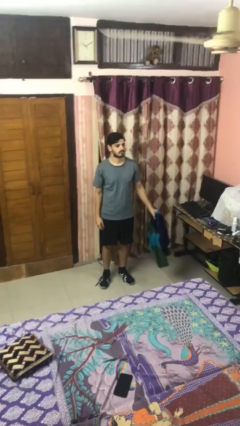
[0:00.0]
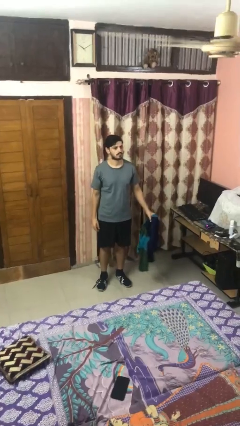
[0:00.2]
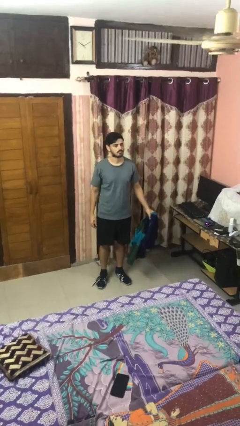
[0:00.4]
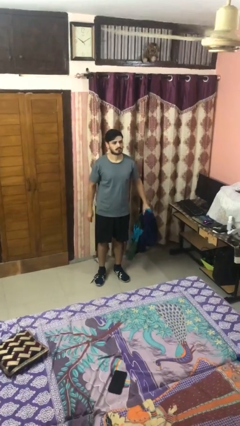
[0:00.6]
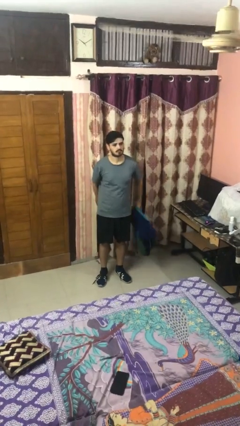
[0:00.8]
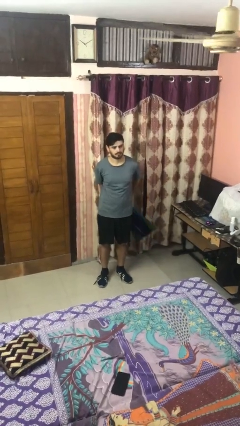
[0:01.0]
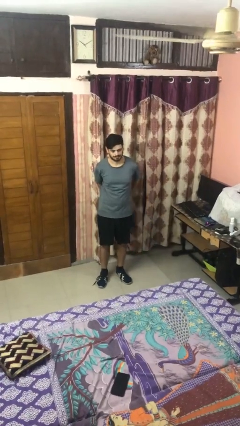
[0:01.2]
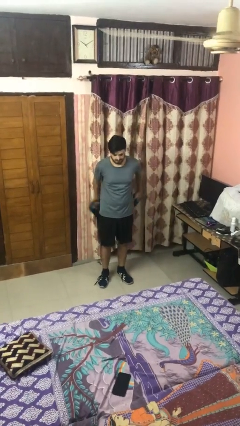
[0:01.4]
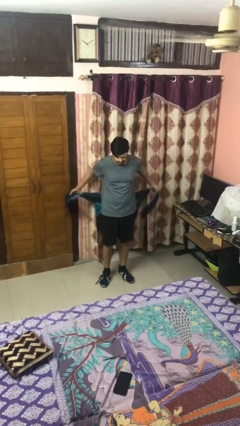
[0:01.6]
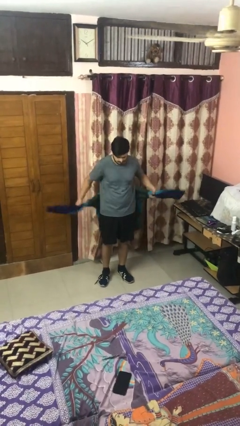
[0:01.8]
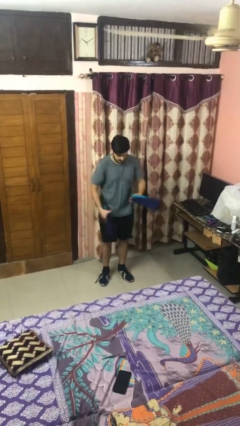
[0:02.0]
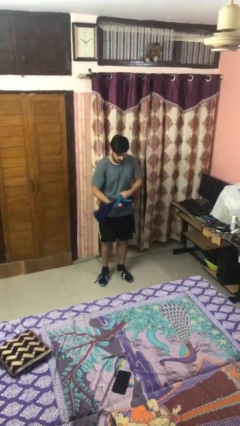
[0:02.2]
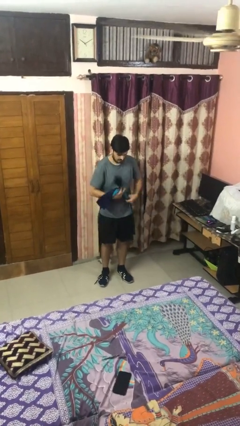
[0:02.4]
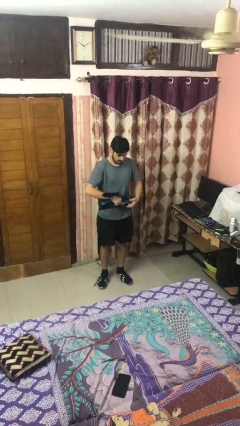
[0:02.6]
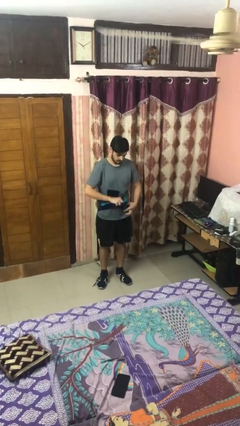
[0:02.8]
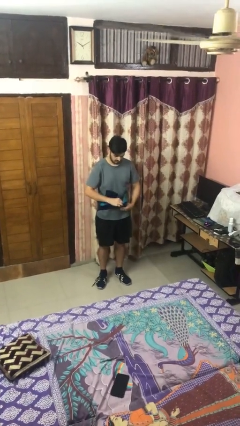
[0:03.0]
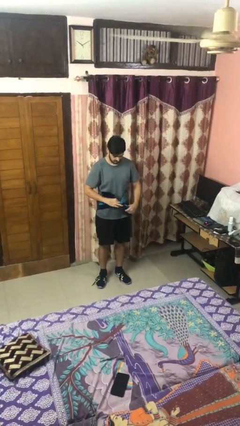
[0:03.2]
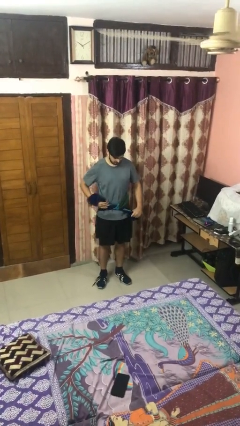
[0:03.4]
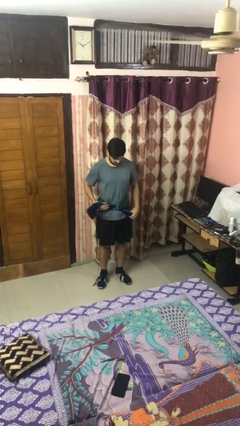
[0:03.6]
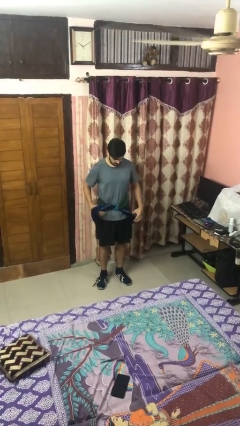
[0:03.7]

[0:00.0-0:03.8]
person ties jacket around waist

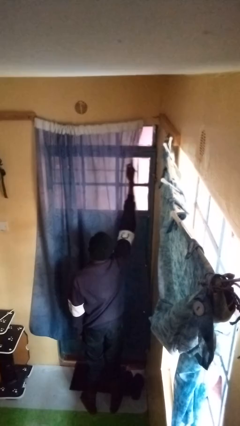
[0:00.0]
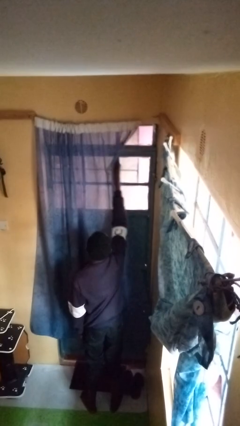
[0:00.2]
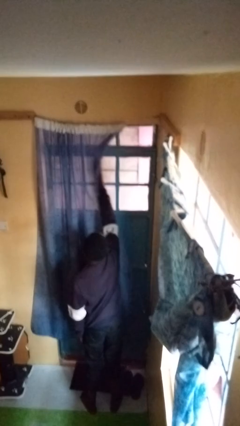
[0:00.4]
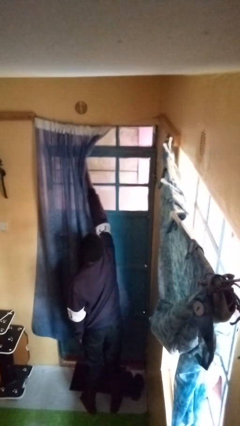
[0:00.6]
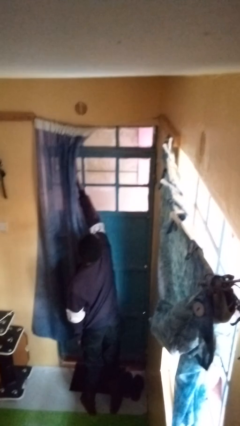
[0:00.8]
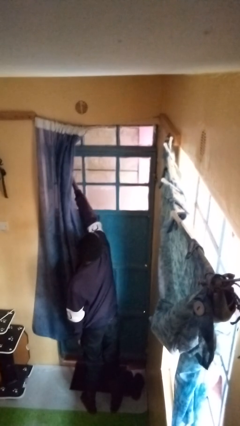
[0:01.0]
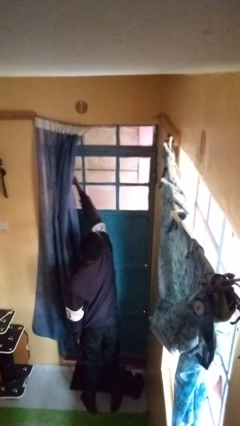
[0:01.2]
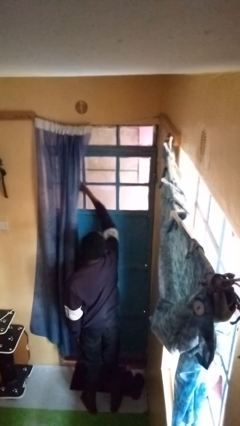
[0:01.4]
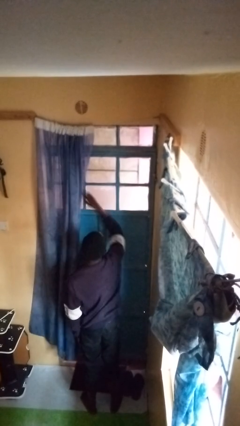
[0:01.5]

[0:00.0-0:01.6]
person opens curtains

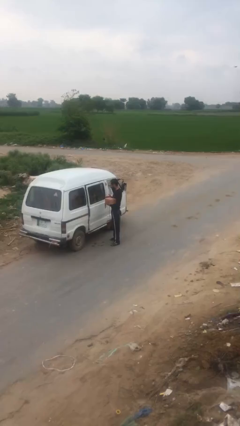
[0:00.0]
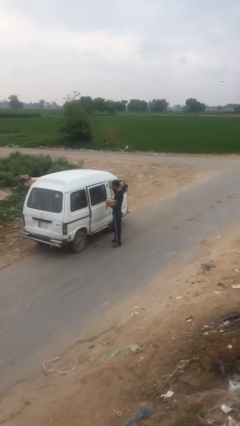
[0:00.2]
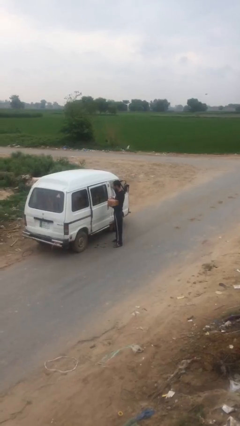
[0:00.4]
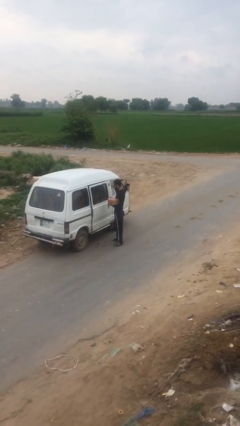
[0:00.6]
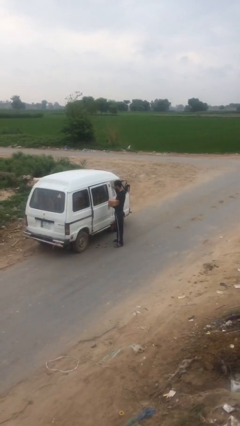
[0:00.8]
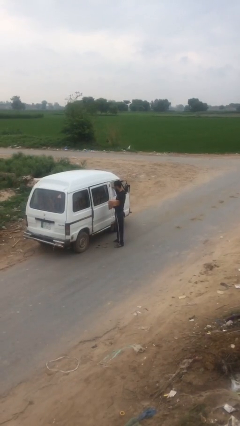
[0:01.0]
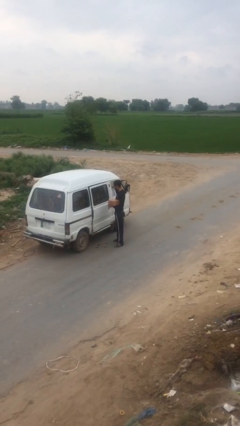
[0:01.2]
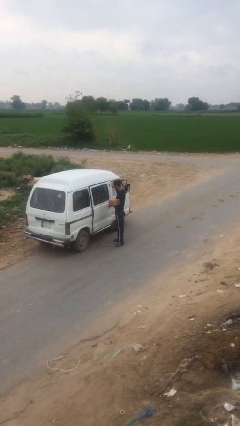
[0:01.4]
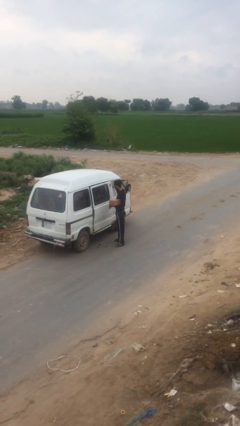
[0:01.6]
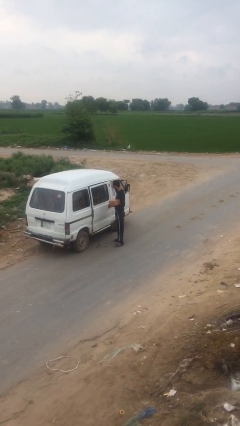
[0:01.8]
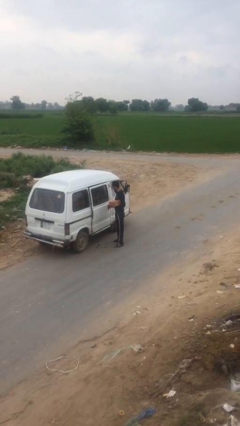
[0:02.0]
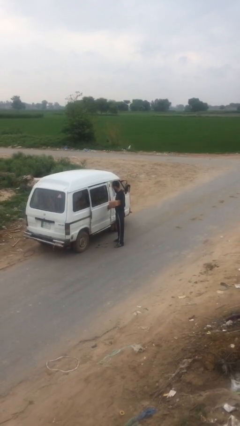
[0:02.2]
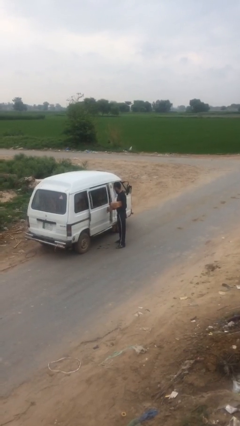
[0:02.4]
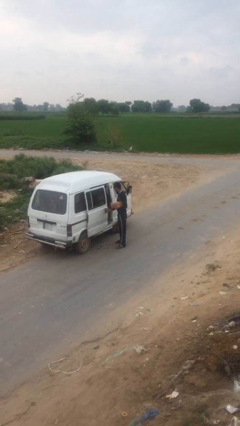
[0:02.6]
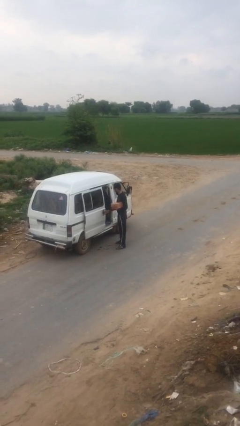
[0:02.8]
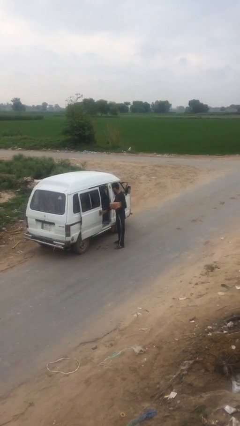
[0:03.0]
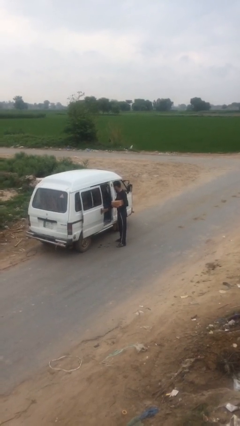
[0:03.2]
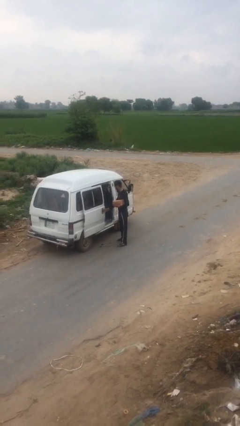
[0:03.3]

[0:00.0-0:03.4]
person opens car door

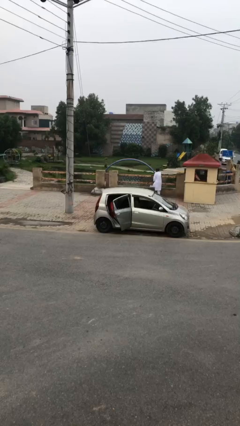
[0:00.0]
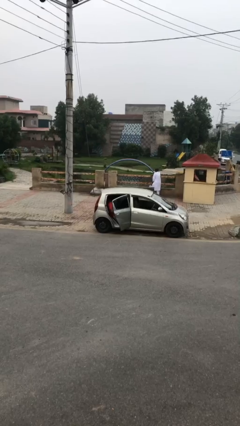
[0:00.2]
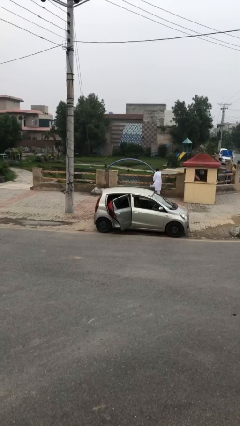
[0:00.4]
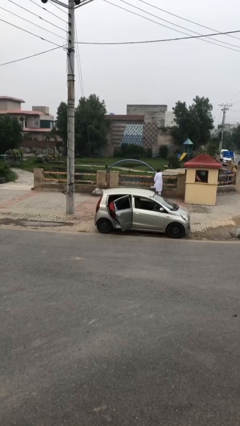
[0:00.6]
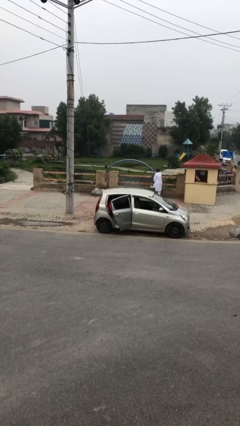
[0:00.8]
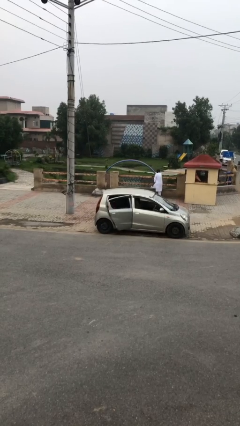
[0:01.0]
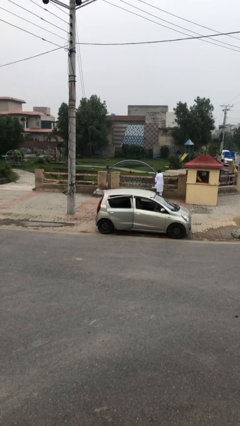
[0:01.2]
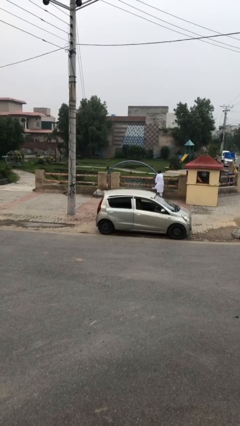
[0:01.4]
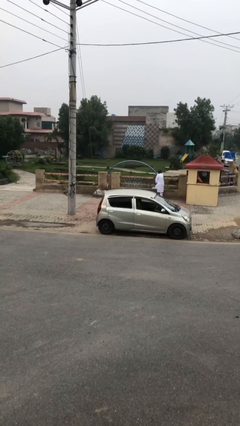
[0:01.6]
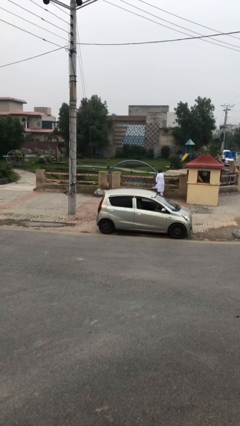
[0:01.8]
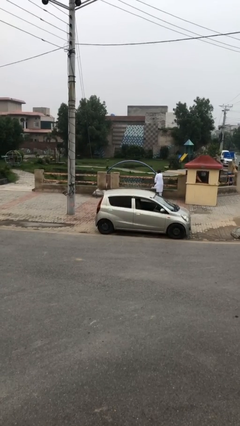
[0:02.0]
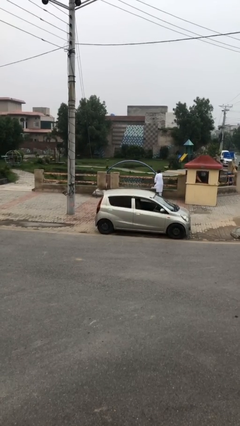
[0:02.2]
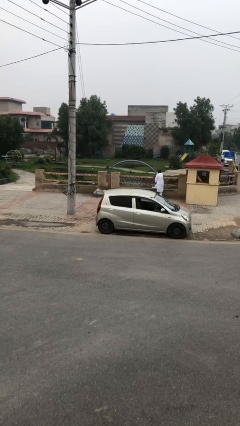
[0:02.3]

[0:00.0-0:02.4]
person closes car door

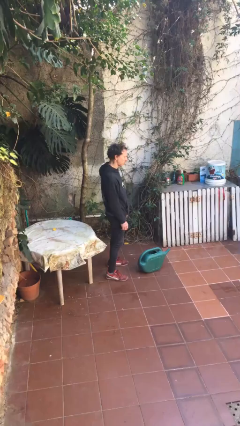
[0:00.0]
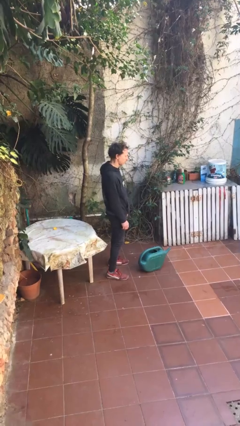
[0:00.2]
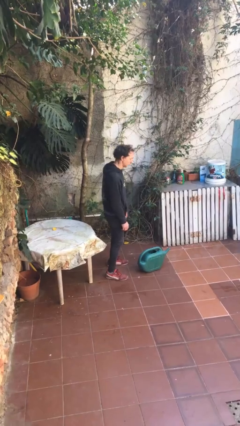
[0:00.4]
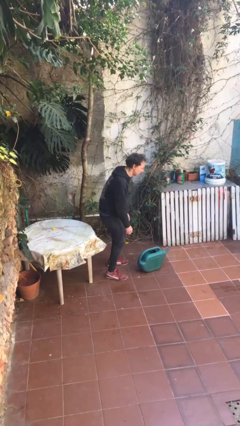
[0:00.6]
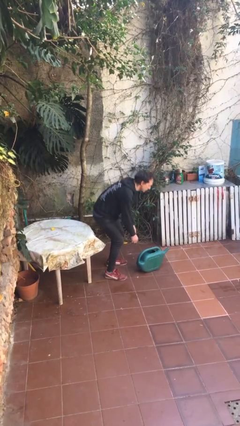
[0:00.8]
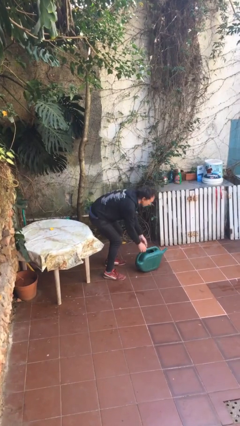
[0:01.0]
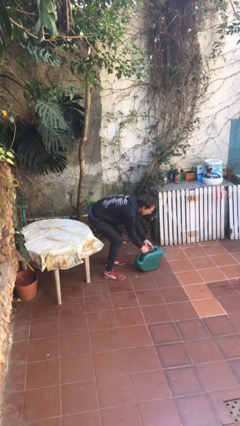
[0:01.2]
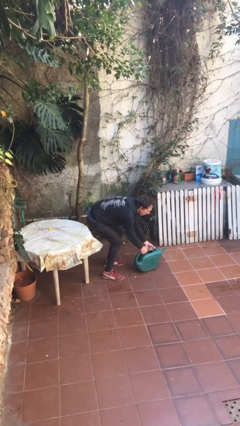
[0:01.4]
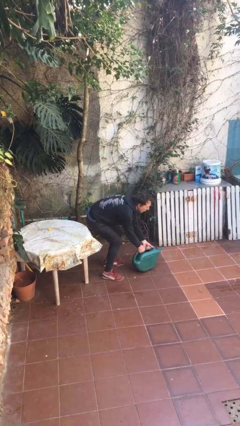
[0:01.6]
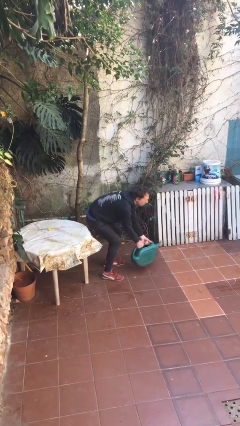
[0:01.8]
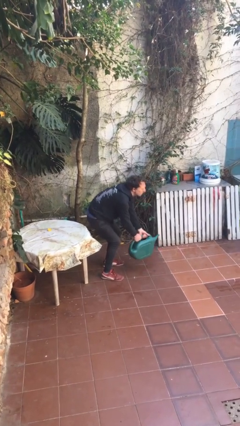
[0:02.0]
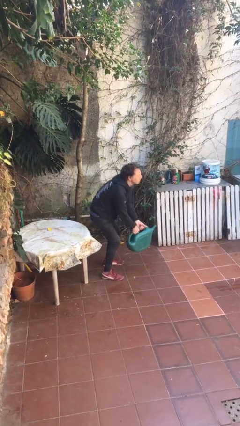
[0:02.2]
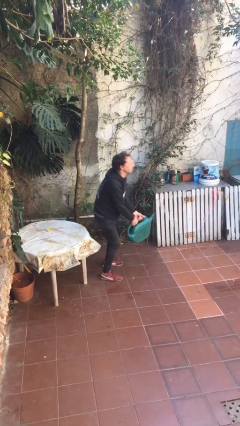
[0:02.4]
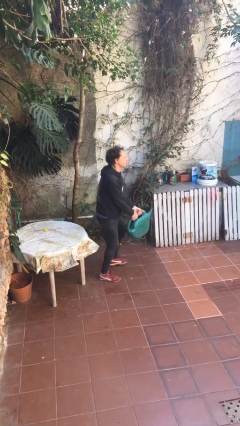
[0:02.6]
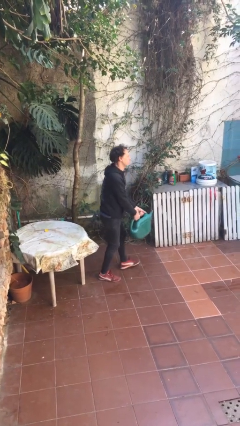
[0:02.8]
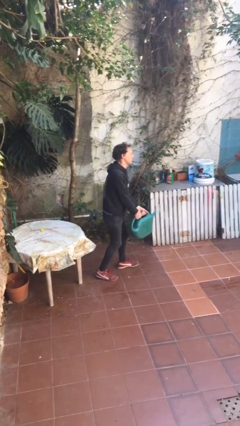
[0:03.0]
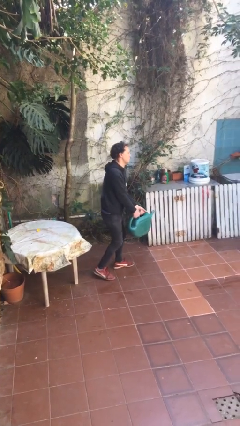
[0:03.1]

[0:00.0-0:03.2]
person picks up object from floor

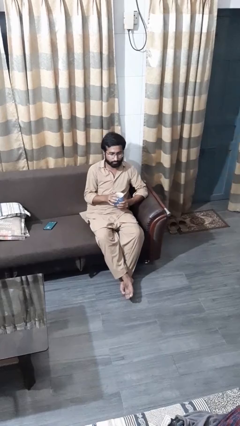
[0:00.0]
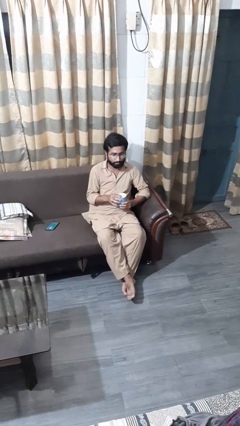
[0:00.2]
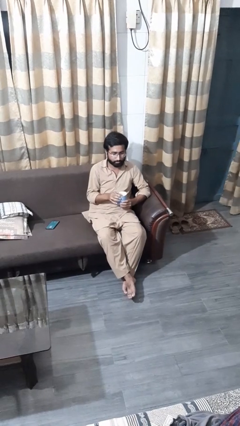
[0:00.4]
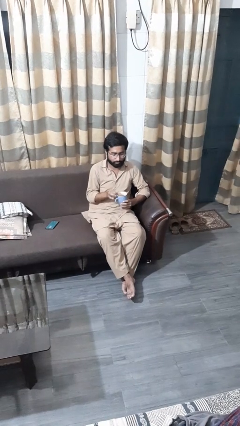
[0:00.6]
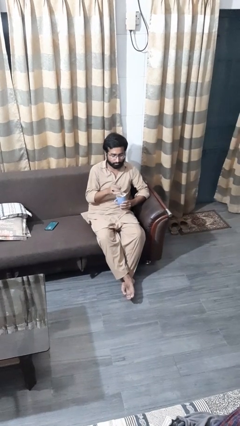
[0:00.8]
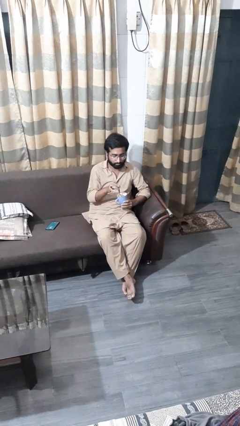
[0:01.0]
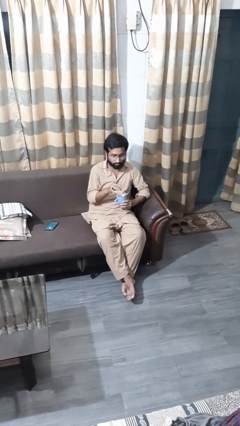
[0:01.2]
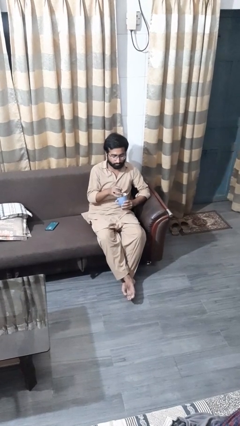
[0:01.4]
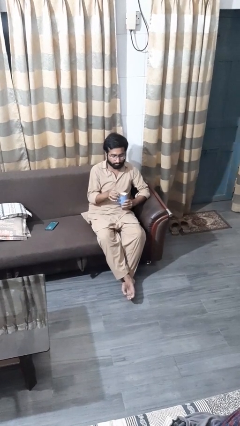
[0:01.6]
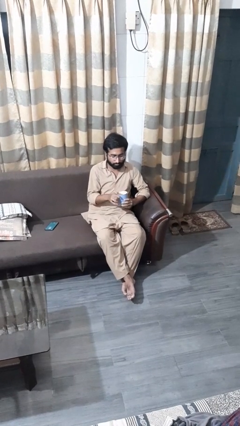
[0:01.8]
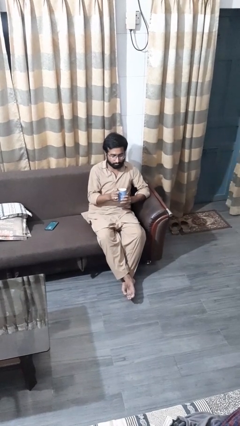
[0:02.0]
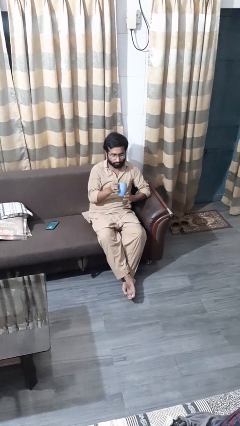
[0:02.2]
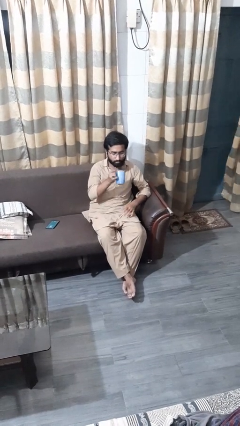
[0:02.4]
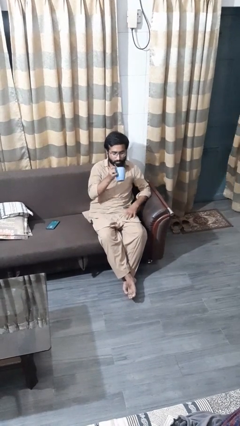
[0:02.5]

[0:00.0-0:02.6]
person stirs mug

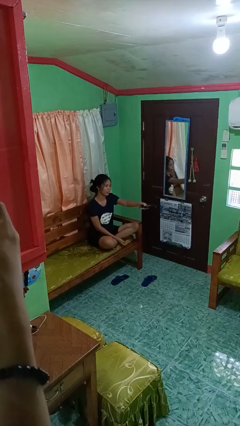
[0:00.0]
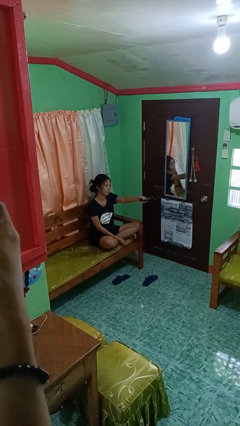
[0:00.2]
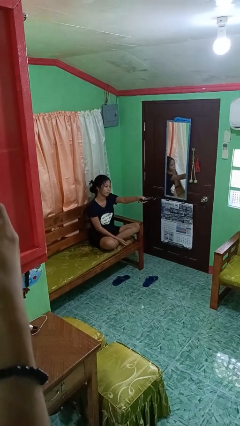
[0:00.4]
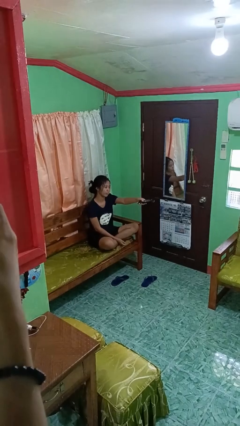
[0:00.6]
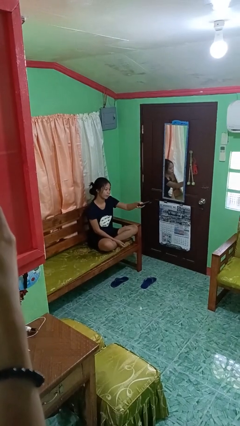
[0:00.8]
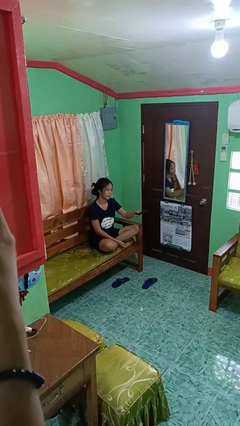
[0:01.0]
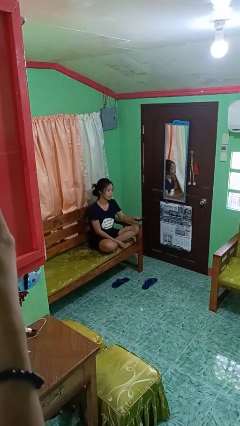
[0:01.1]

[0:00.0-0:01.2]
person uses television remote
